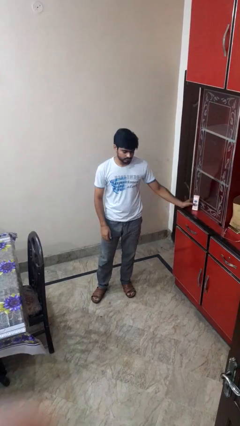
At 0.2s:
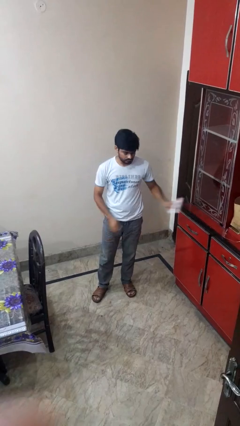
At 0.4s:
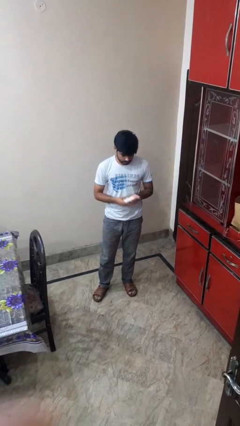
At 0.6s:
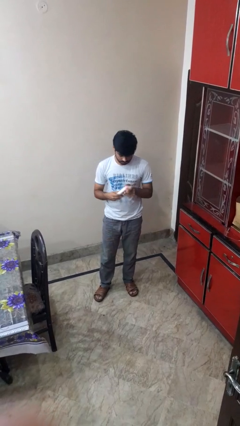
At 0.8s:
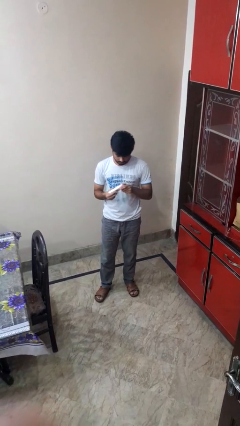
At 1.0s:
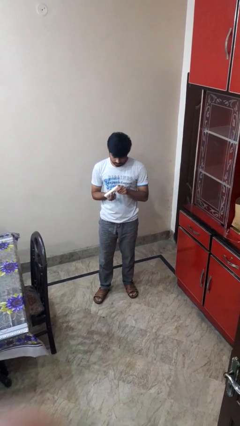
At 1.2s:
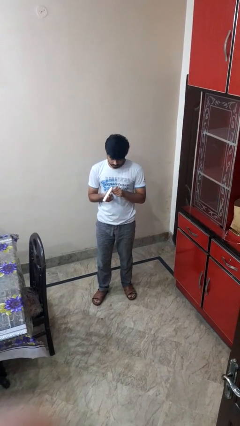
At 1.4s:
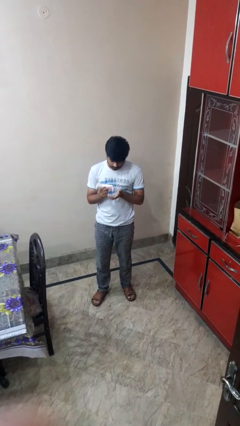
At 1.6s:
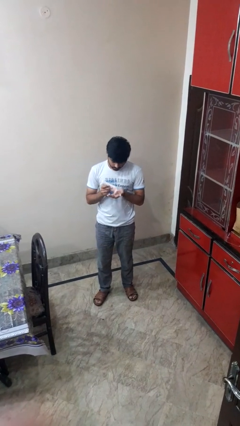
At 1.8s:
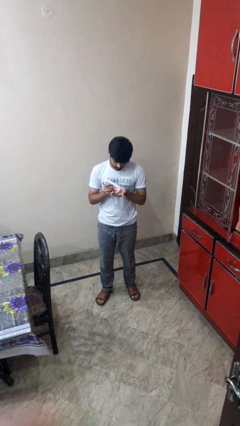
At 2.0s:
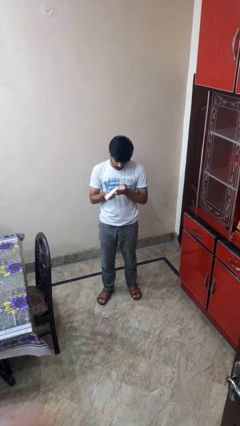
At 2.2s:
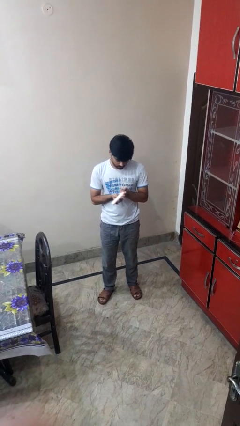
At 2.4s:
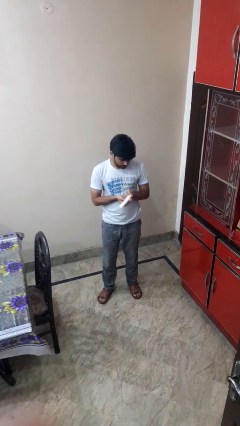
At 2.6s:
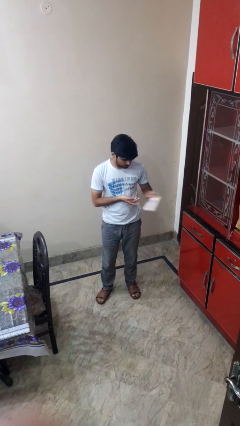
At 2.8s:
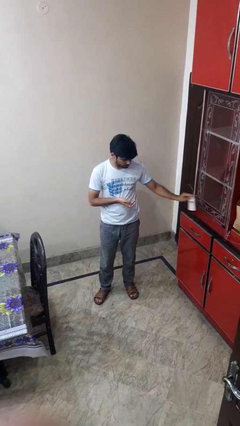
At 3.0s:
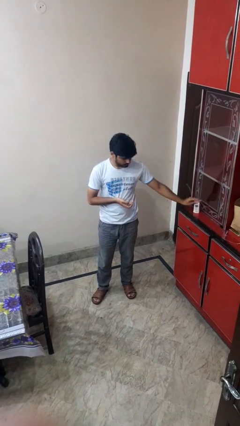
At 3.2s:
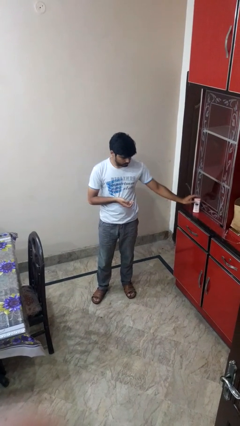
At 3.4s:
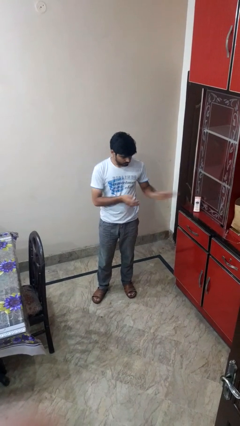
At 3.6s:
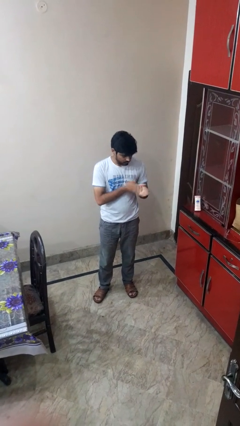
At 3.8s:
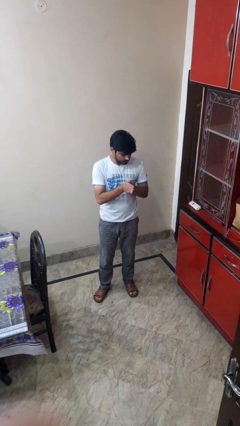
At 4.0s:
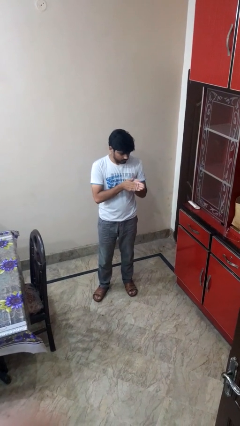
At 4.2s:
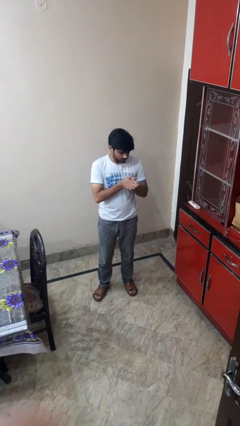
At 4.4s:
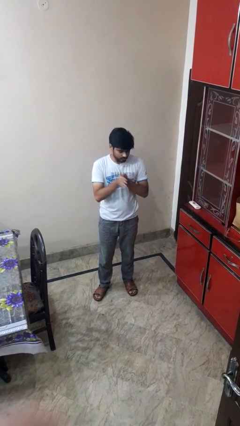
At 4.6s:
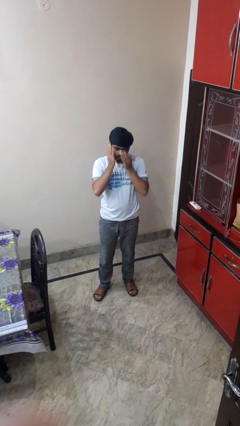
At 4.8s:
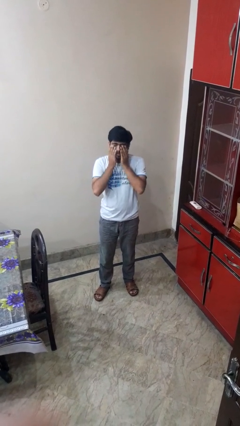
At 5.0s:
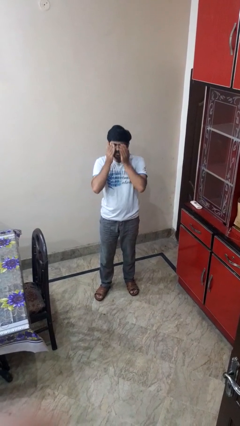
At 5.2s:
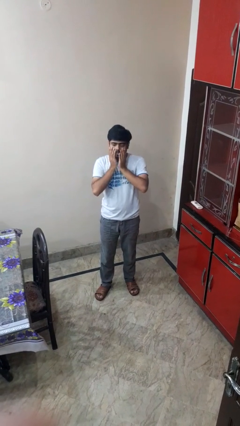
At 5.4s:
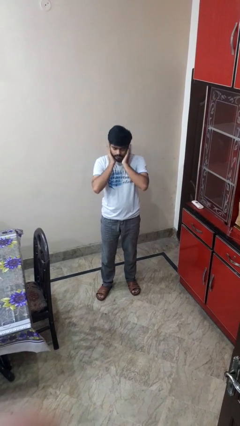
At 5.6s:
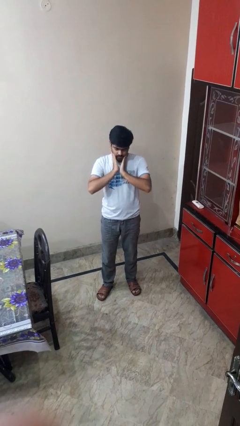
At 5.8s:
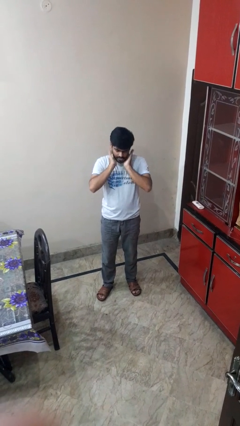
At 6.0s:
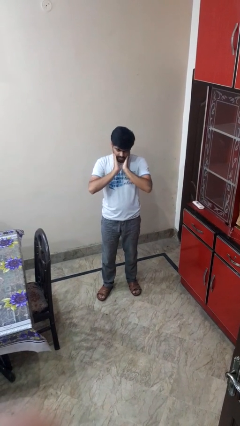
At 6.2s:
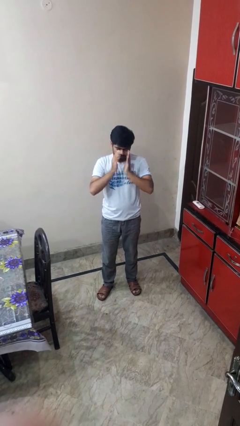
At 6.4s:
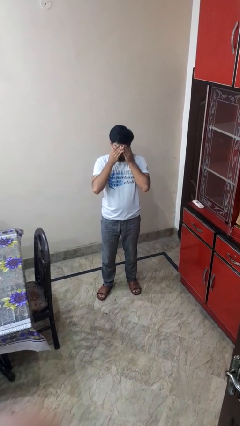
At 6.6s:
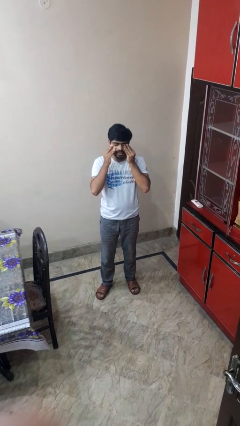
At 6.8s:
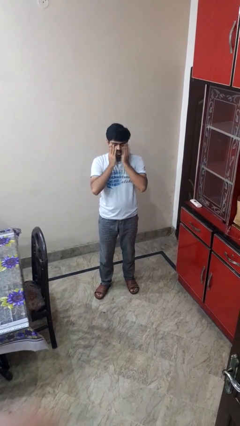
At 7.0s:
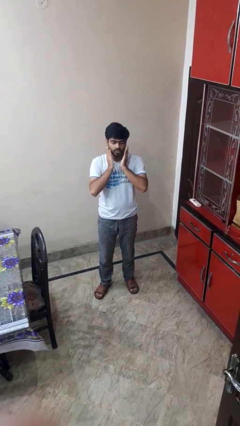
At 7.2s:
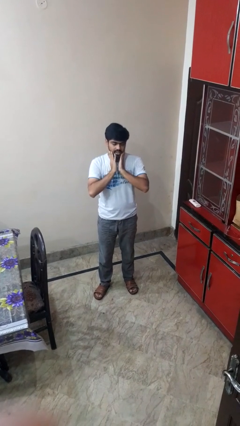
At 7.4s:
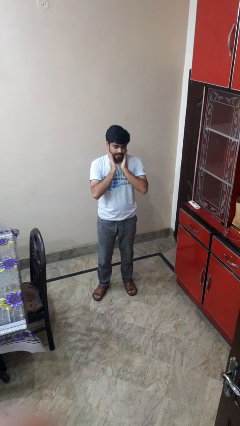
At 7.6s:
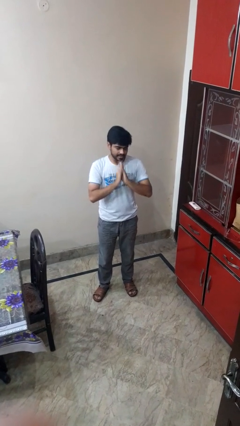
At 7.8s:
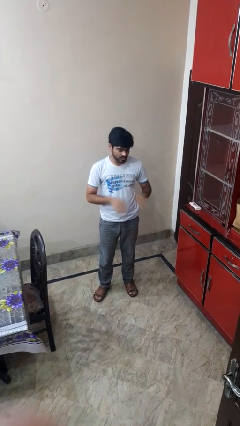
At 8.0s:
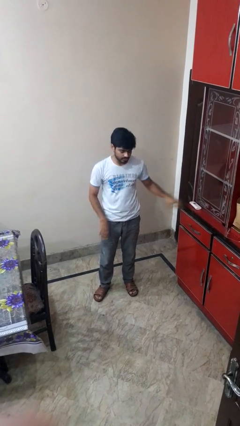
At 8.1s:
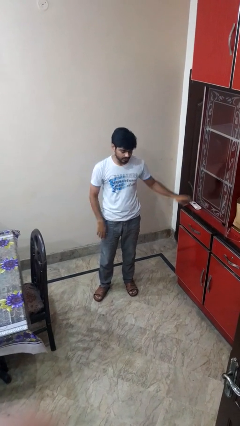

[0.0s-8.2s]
person applies facial moisturizer

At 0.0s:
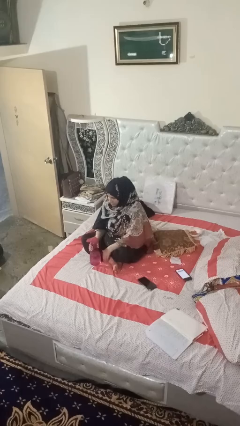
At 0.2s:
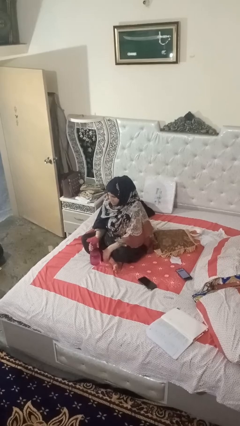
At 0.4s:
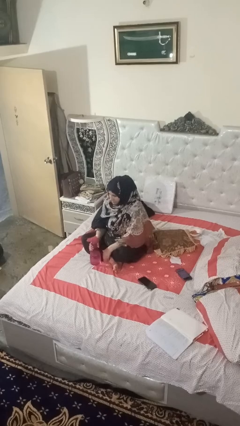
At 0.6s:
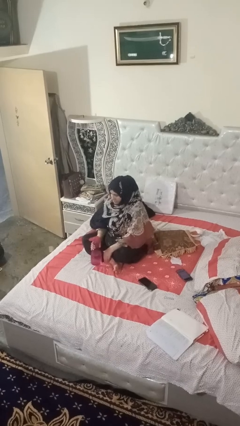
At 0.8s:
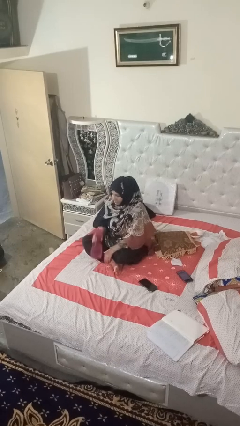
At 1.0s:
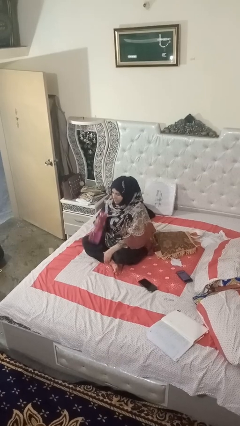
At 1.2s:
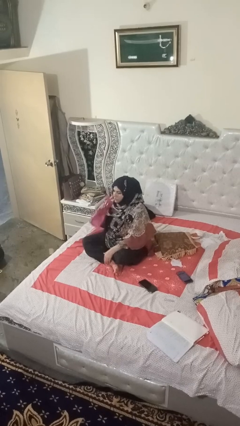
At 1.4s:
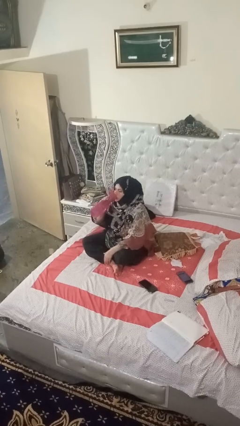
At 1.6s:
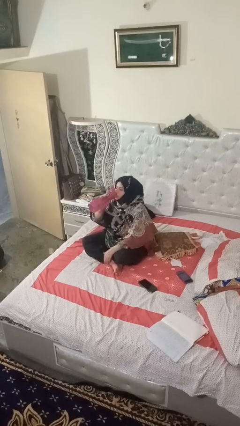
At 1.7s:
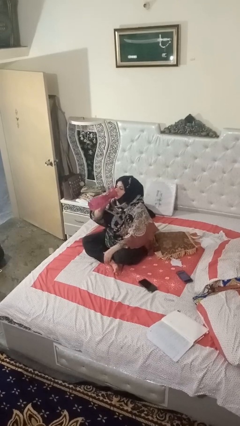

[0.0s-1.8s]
person drinks from bottle

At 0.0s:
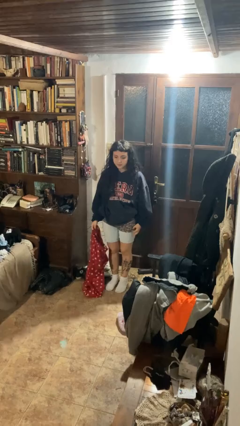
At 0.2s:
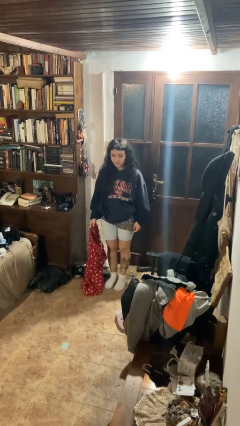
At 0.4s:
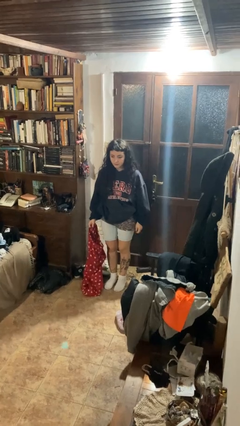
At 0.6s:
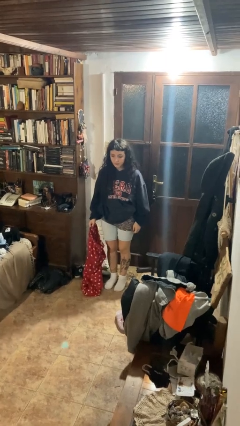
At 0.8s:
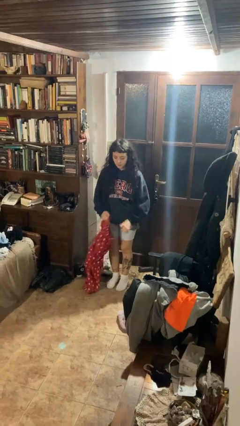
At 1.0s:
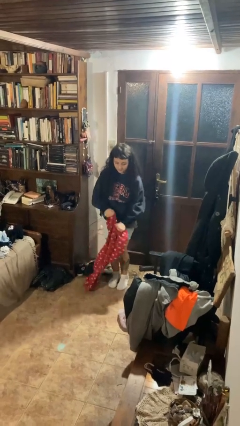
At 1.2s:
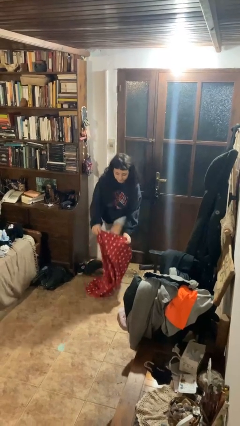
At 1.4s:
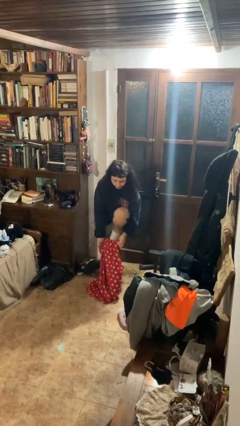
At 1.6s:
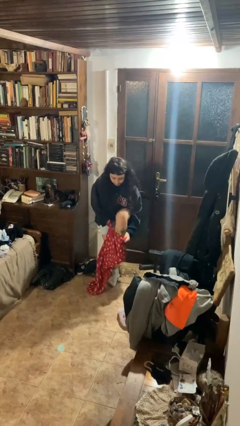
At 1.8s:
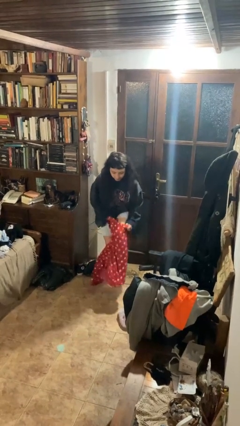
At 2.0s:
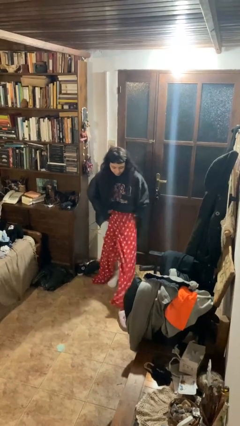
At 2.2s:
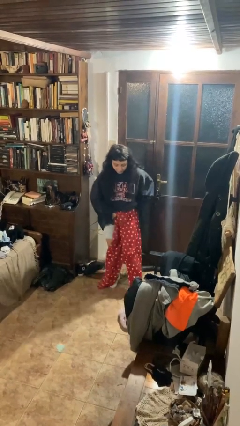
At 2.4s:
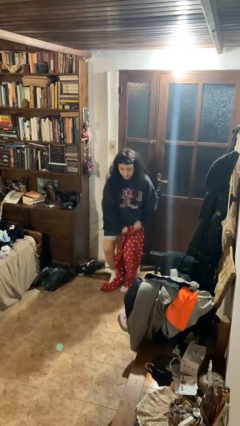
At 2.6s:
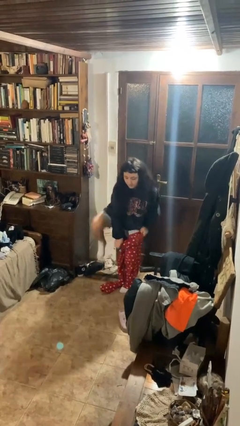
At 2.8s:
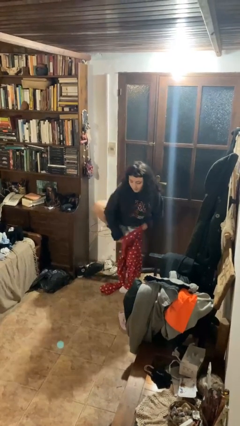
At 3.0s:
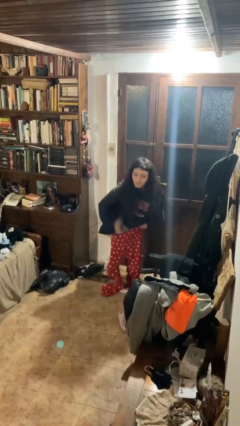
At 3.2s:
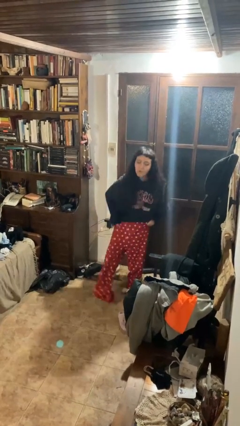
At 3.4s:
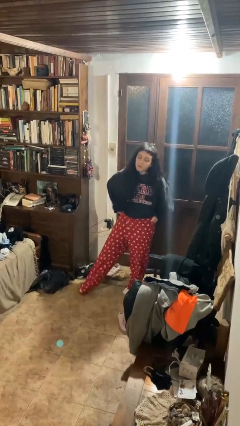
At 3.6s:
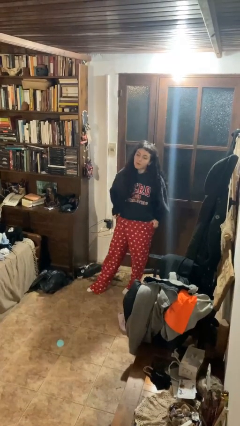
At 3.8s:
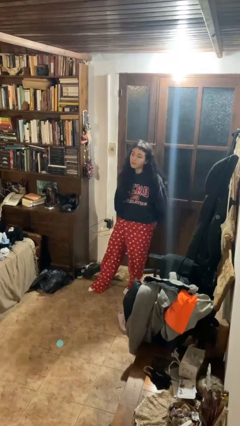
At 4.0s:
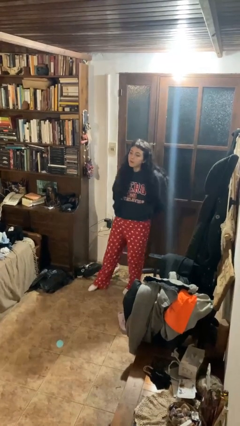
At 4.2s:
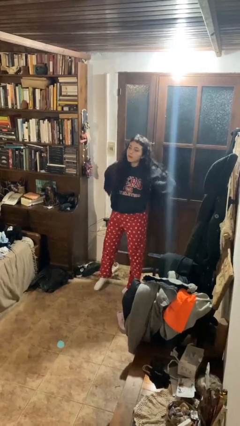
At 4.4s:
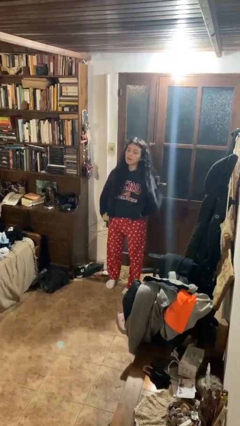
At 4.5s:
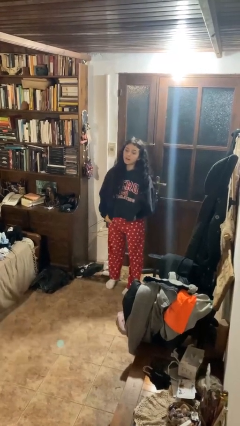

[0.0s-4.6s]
person puts on pants

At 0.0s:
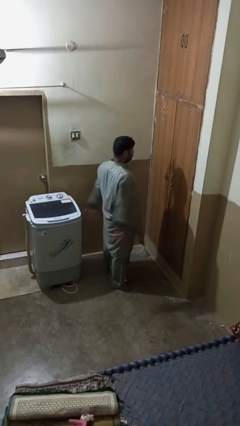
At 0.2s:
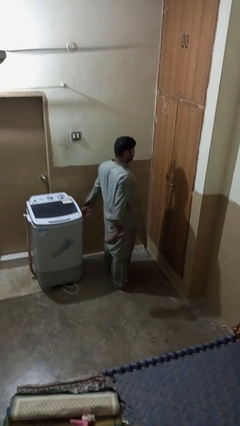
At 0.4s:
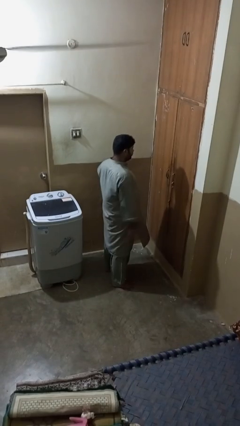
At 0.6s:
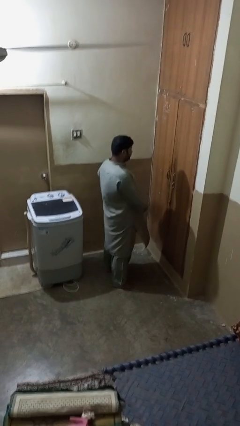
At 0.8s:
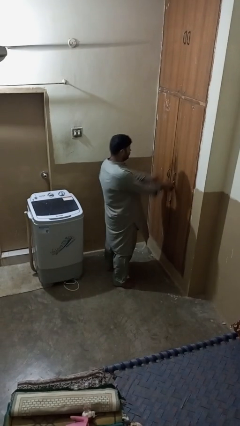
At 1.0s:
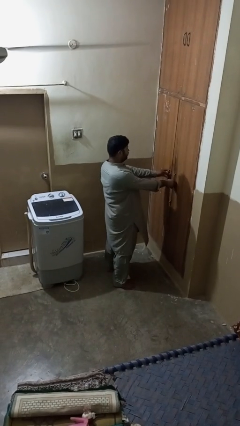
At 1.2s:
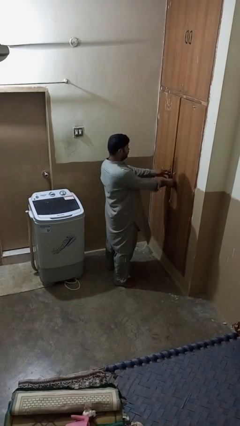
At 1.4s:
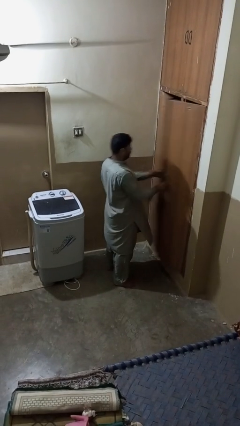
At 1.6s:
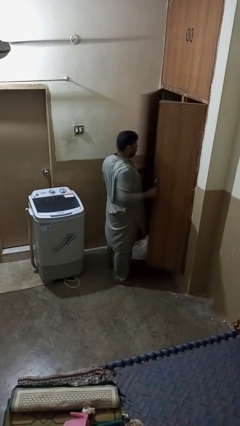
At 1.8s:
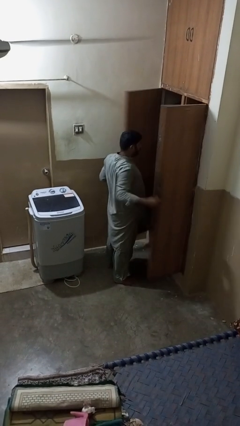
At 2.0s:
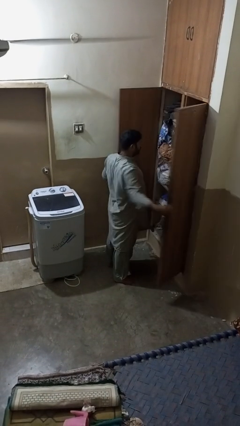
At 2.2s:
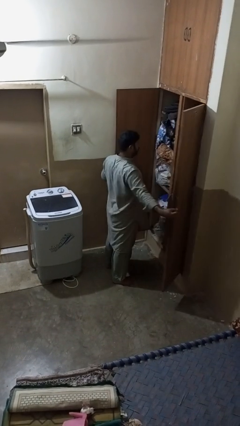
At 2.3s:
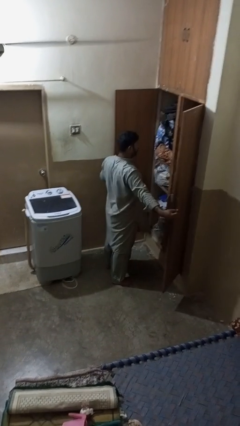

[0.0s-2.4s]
person opens closet door

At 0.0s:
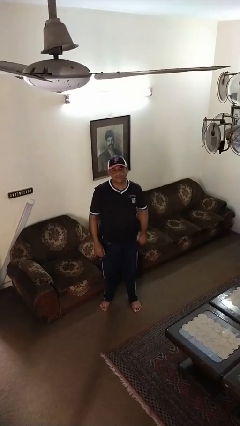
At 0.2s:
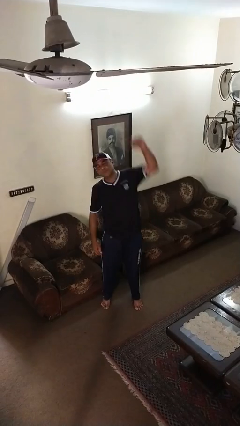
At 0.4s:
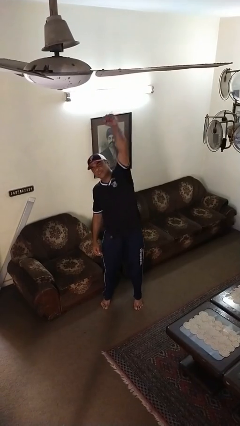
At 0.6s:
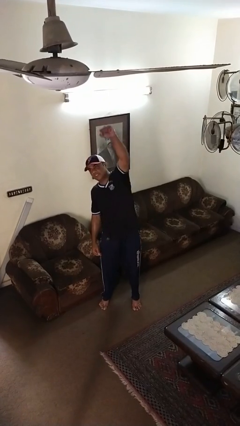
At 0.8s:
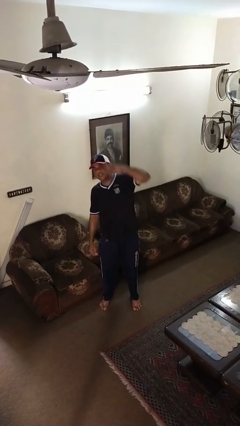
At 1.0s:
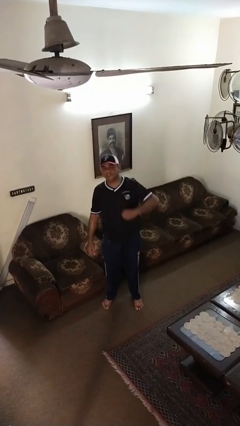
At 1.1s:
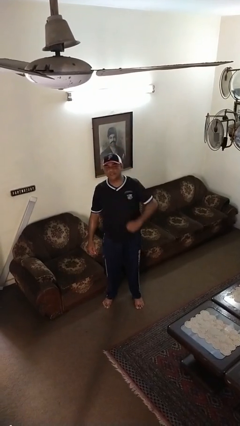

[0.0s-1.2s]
person punches
